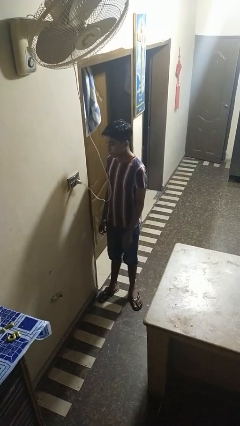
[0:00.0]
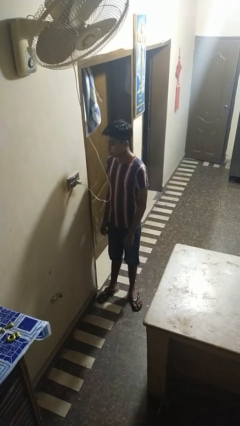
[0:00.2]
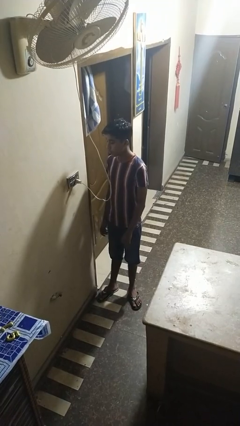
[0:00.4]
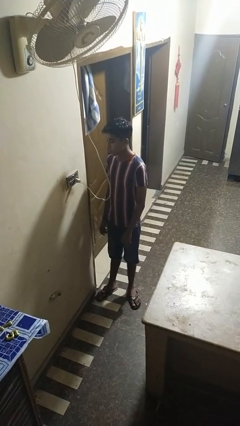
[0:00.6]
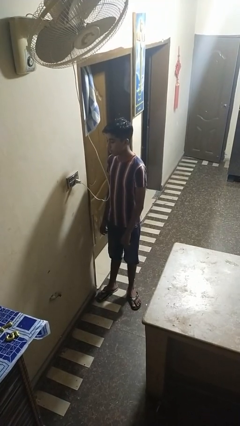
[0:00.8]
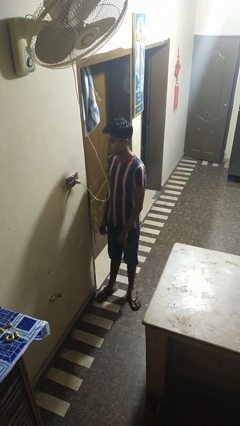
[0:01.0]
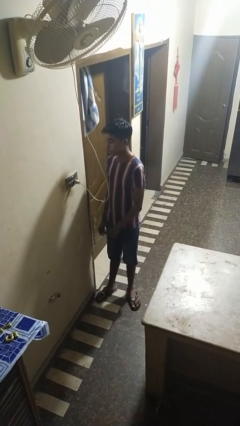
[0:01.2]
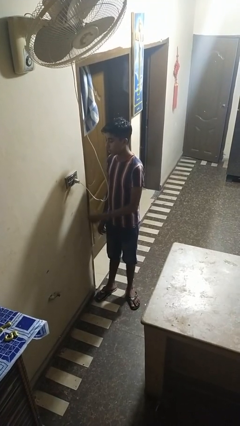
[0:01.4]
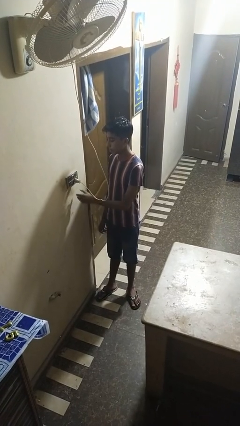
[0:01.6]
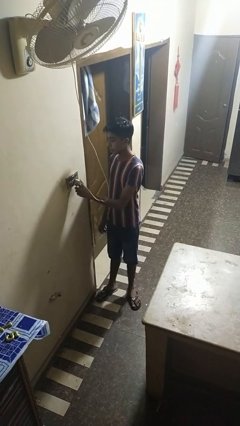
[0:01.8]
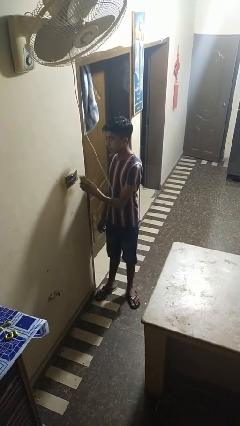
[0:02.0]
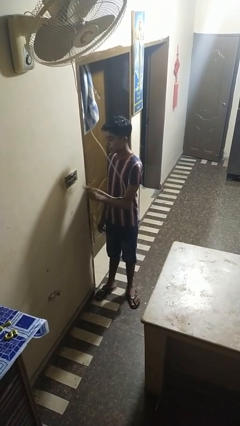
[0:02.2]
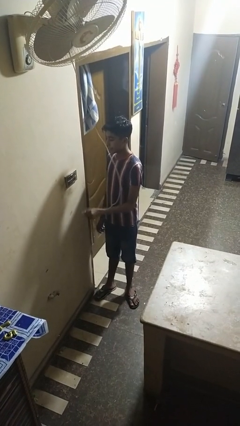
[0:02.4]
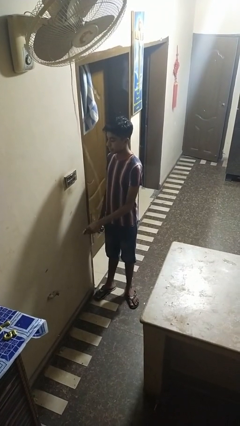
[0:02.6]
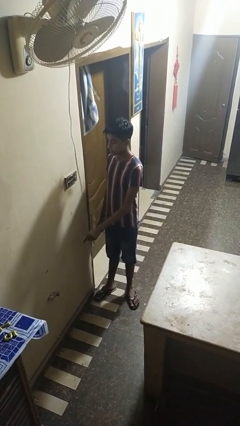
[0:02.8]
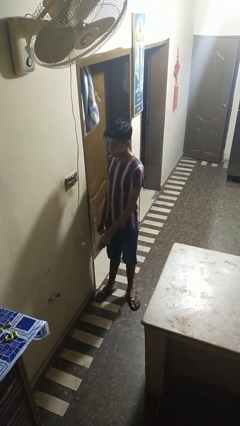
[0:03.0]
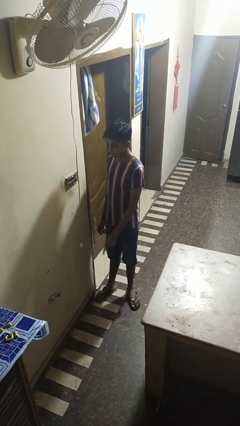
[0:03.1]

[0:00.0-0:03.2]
person unplugs from electrical socket

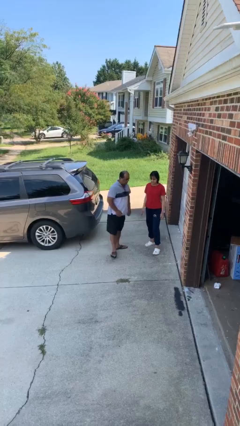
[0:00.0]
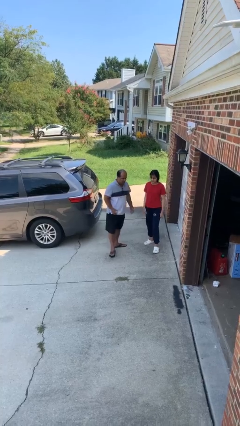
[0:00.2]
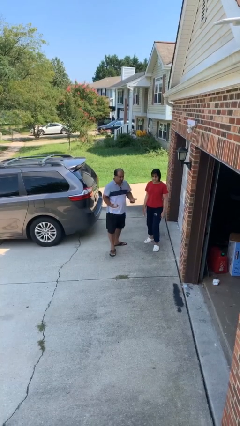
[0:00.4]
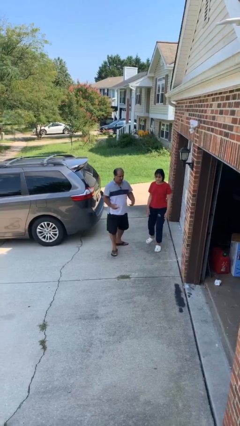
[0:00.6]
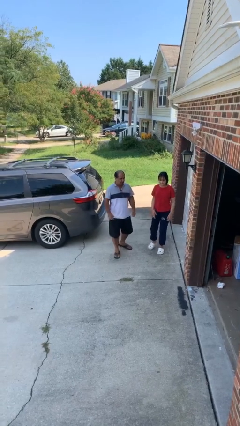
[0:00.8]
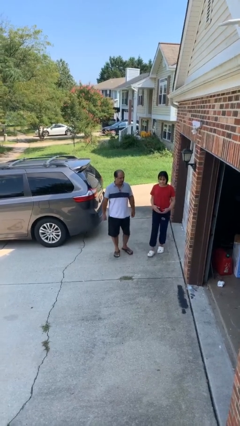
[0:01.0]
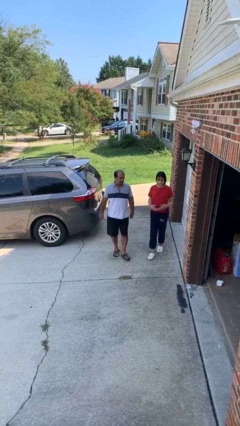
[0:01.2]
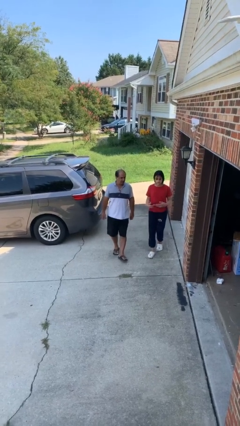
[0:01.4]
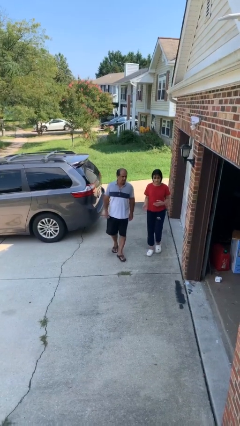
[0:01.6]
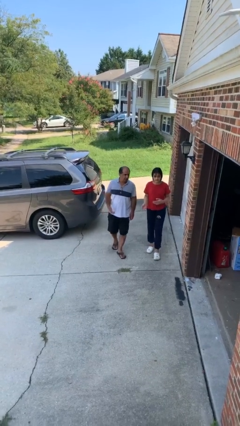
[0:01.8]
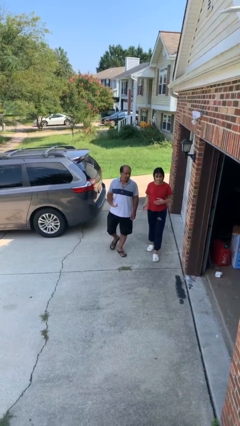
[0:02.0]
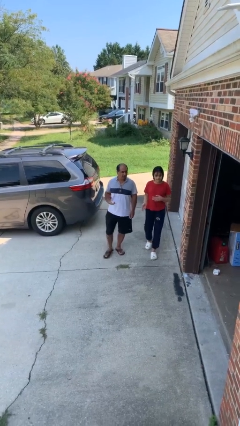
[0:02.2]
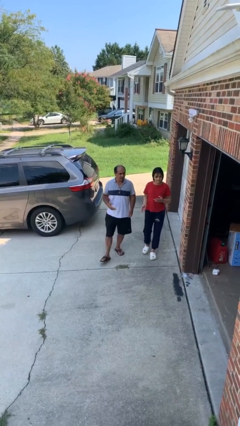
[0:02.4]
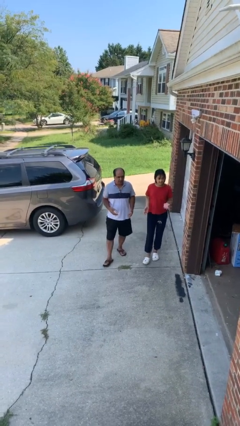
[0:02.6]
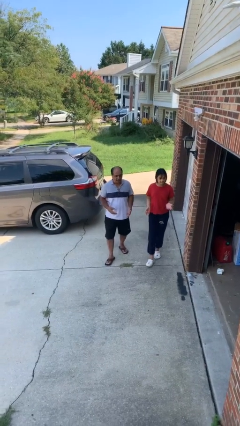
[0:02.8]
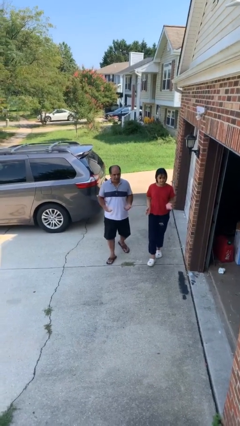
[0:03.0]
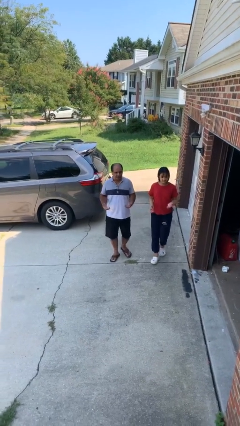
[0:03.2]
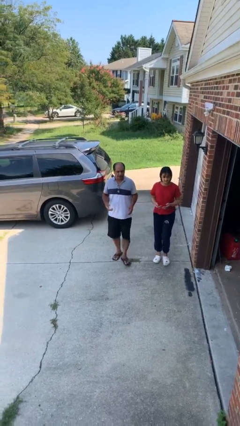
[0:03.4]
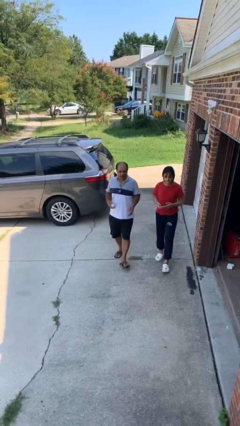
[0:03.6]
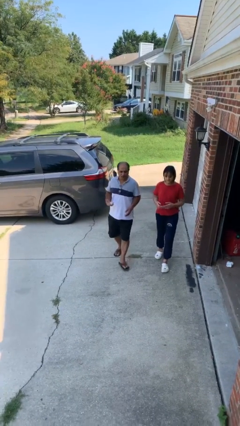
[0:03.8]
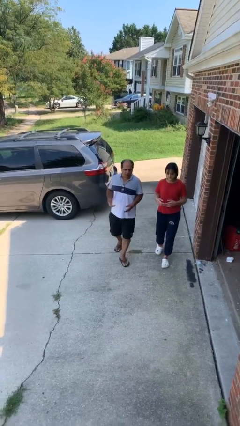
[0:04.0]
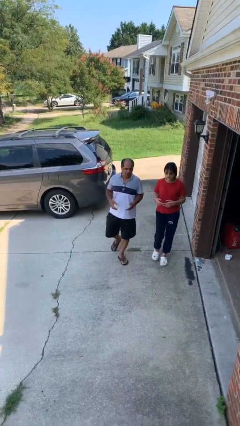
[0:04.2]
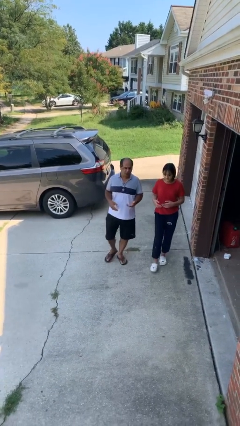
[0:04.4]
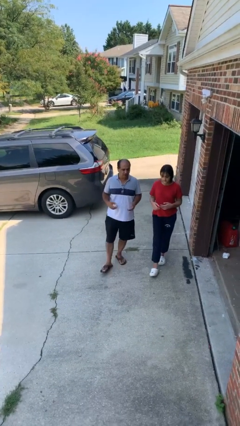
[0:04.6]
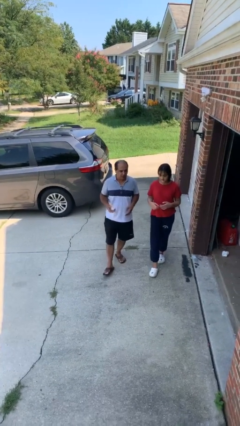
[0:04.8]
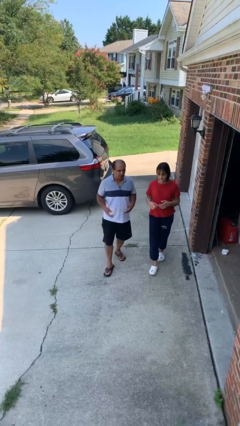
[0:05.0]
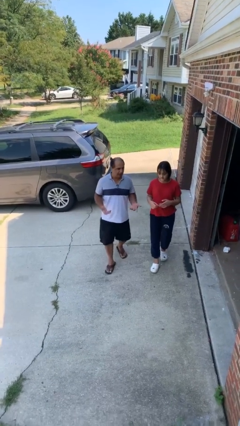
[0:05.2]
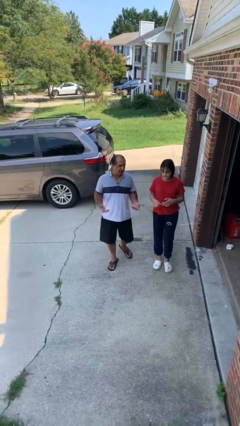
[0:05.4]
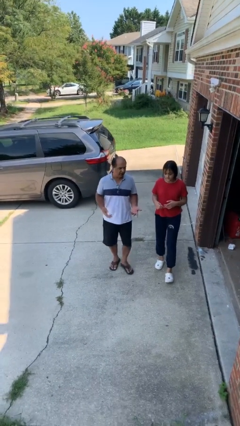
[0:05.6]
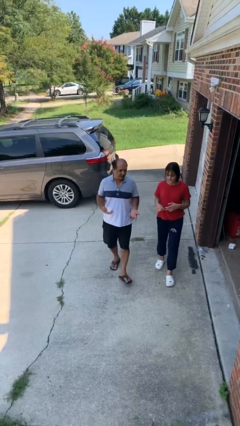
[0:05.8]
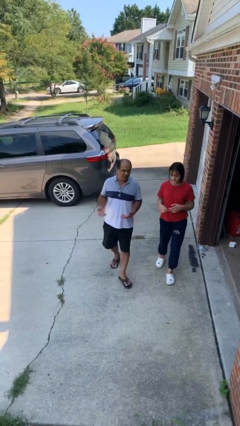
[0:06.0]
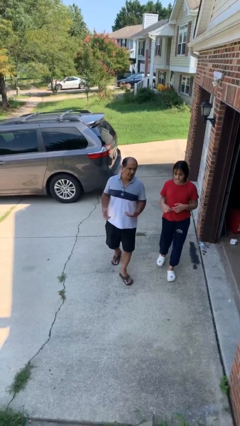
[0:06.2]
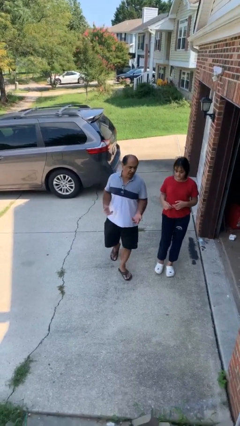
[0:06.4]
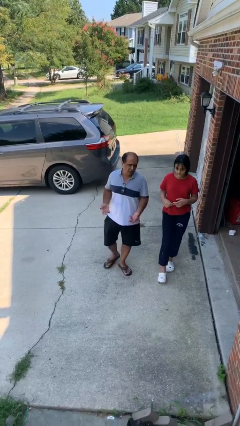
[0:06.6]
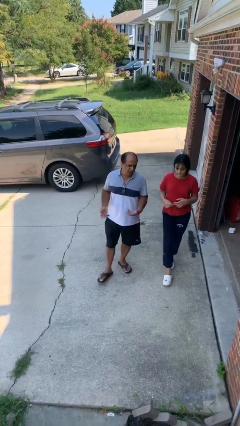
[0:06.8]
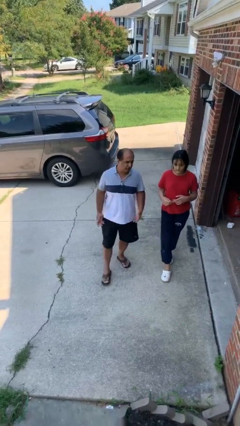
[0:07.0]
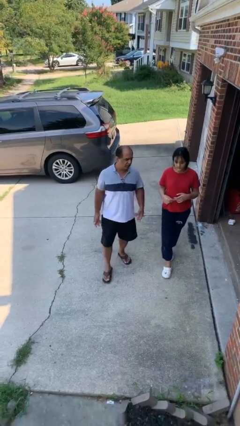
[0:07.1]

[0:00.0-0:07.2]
person talks to person

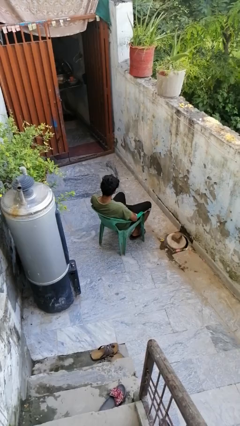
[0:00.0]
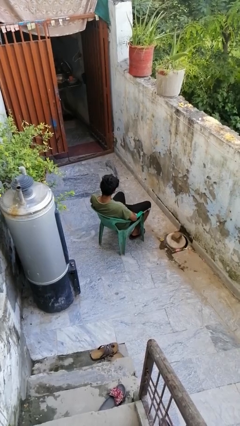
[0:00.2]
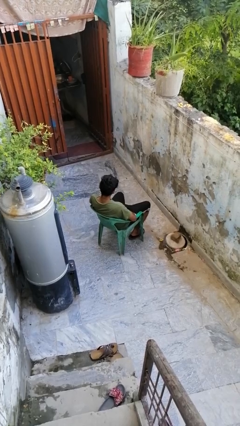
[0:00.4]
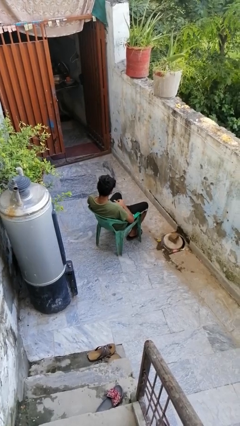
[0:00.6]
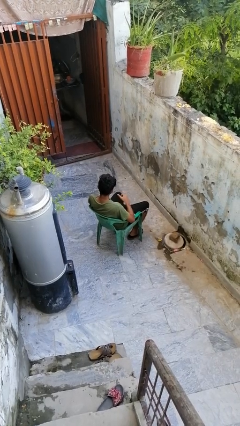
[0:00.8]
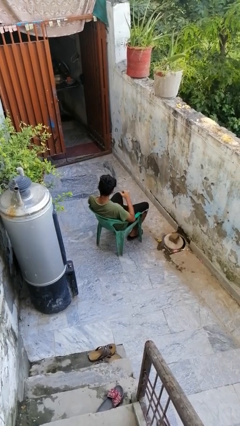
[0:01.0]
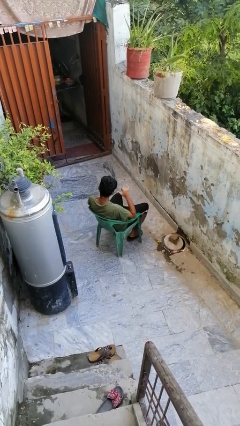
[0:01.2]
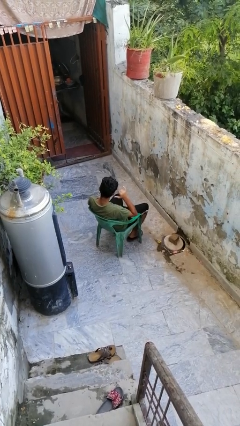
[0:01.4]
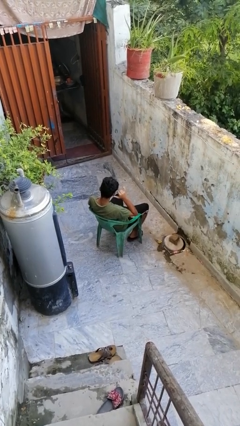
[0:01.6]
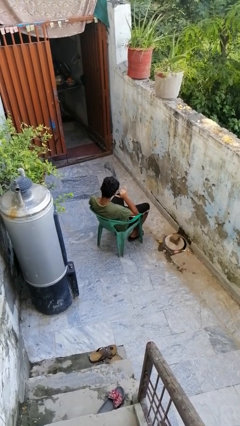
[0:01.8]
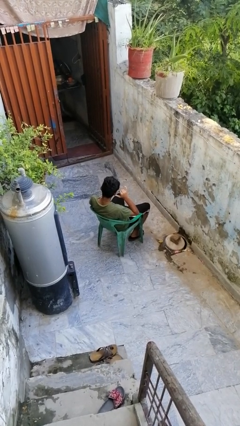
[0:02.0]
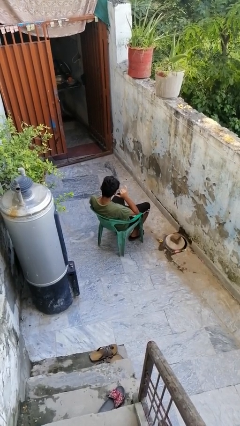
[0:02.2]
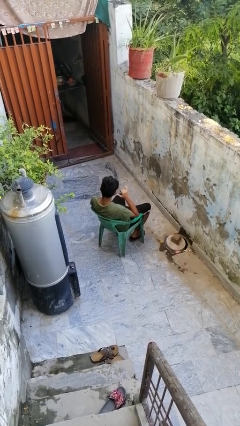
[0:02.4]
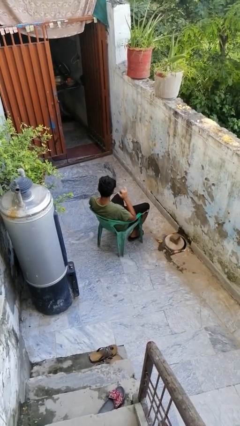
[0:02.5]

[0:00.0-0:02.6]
person gestures call me

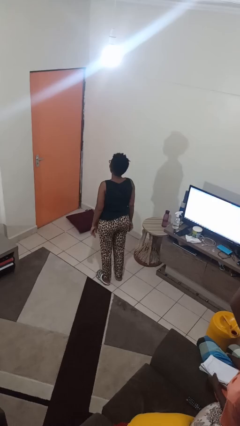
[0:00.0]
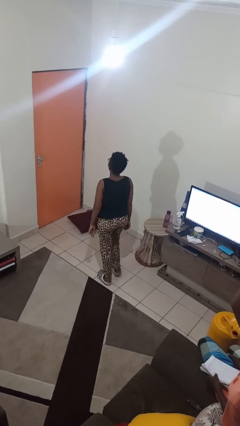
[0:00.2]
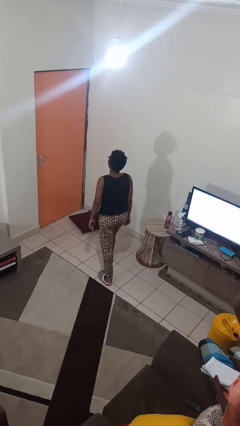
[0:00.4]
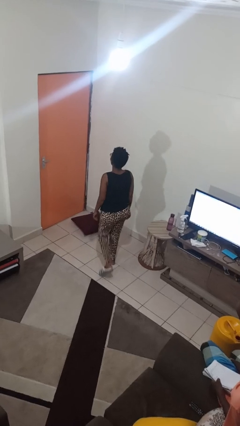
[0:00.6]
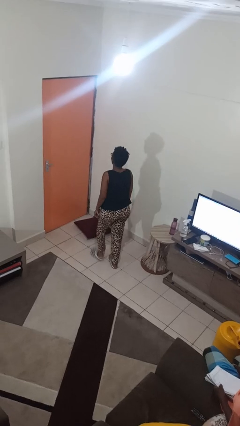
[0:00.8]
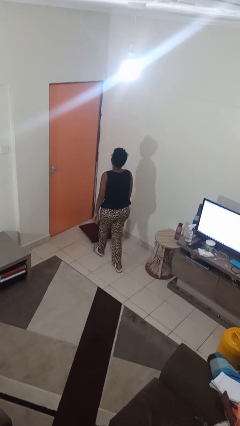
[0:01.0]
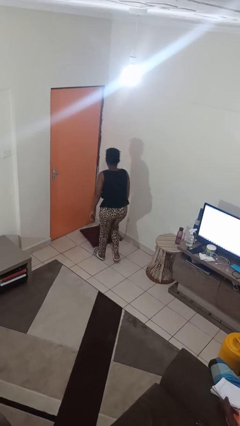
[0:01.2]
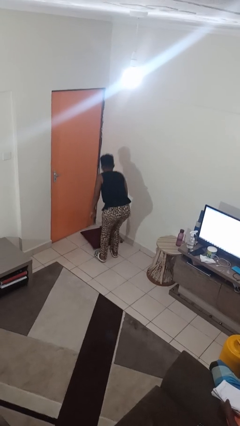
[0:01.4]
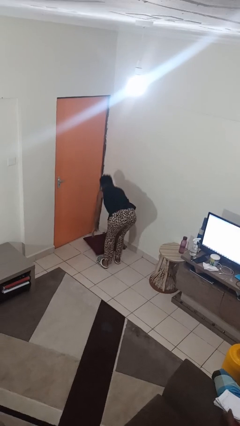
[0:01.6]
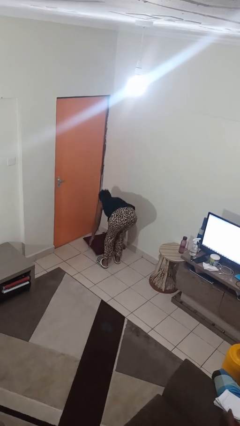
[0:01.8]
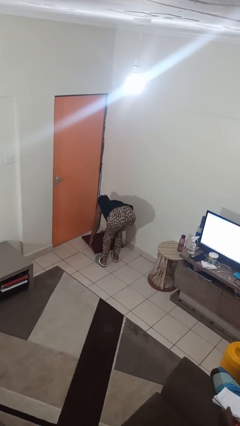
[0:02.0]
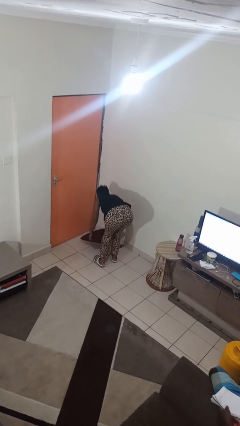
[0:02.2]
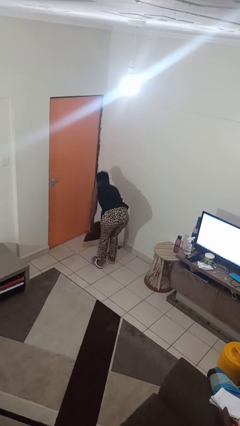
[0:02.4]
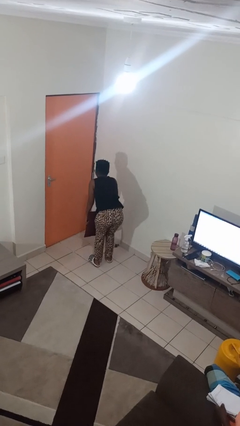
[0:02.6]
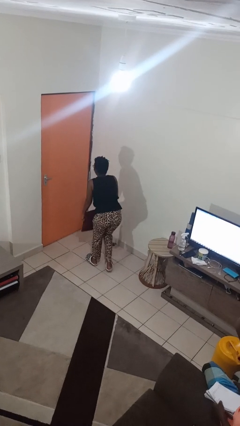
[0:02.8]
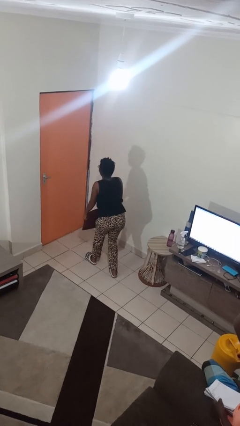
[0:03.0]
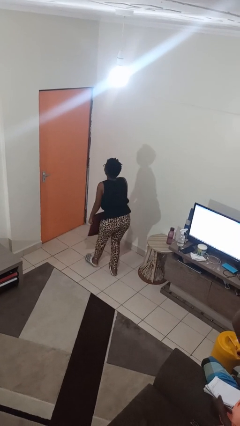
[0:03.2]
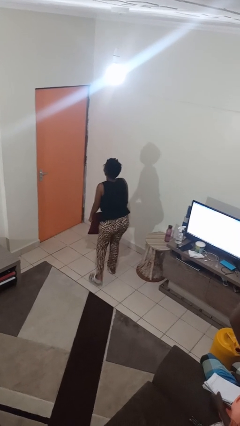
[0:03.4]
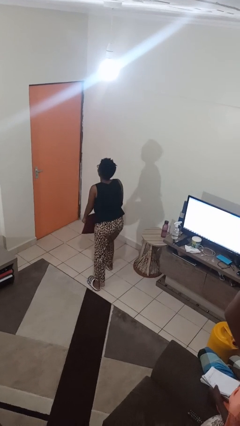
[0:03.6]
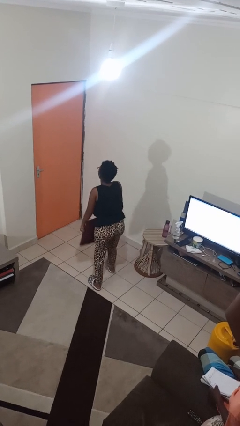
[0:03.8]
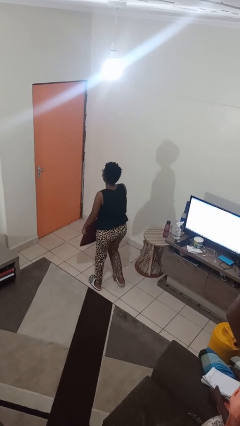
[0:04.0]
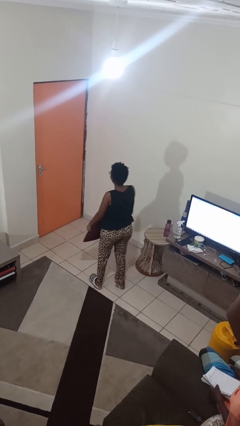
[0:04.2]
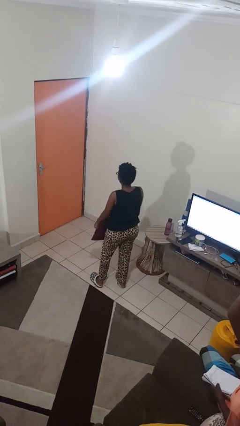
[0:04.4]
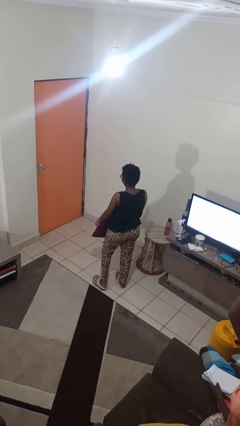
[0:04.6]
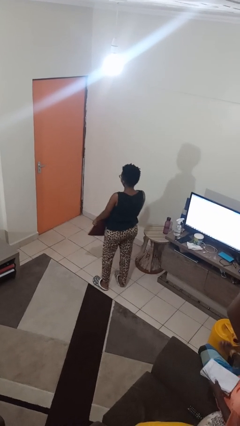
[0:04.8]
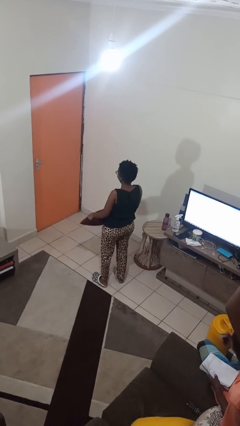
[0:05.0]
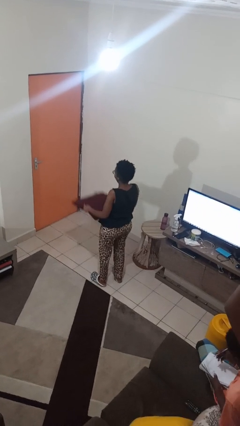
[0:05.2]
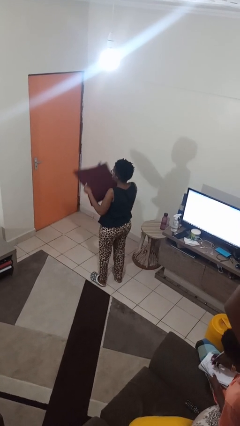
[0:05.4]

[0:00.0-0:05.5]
person picks up object from floor
